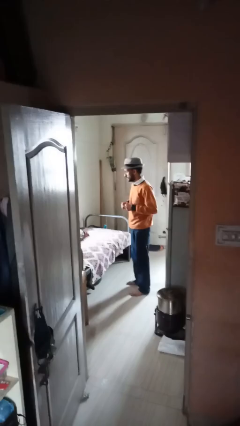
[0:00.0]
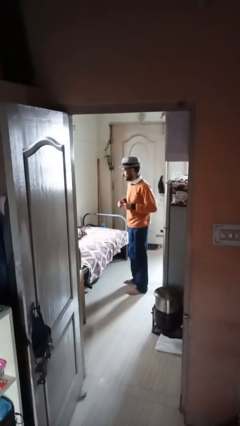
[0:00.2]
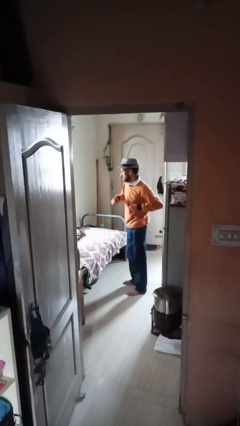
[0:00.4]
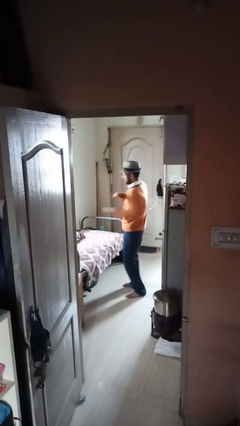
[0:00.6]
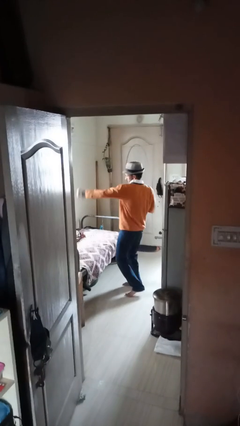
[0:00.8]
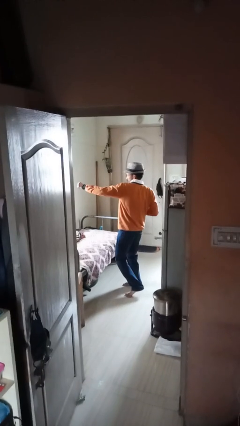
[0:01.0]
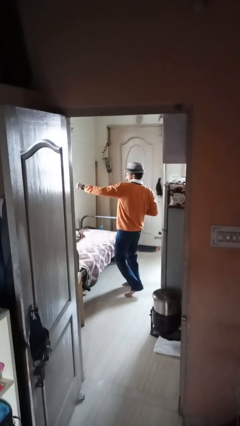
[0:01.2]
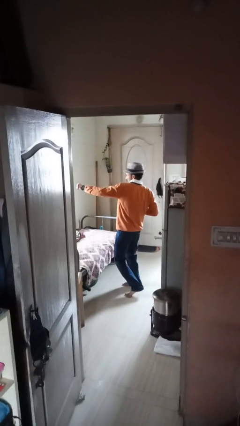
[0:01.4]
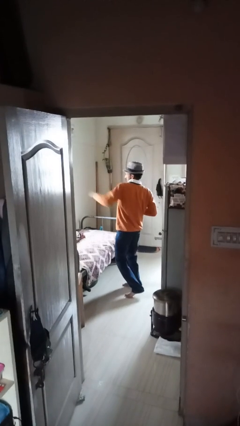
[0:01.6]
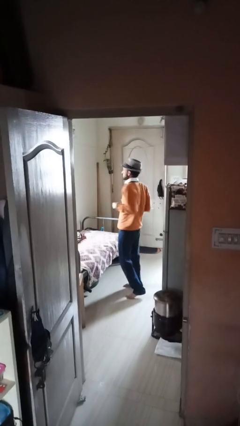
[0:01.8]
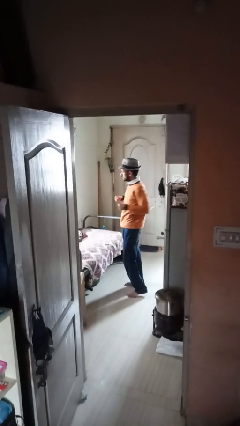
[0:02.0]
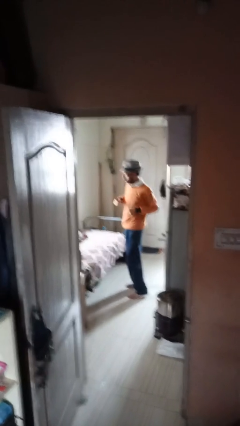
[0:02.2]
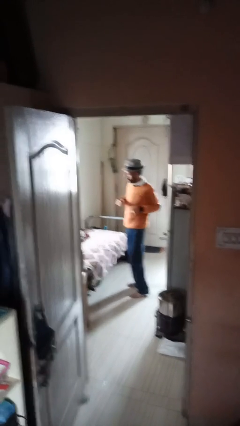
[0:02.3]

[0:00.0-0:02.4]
person punches

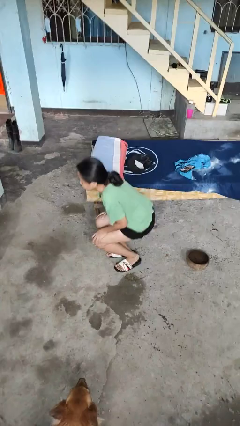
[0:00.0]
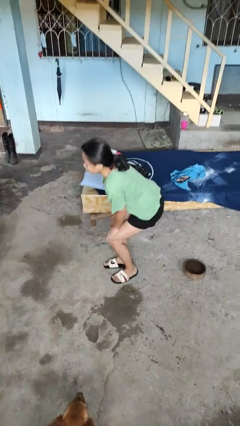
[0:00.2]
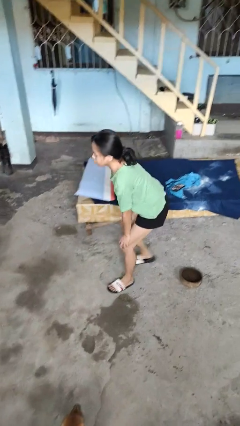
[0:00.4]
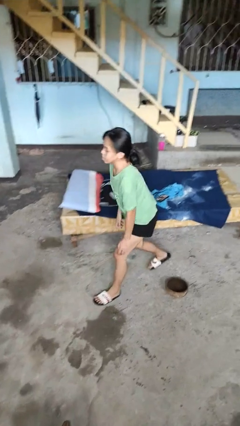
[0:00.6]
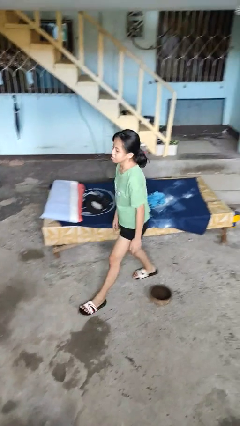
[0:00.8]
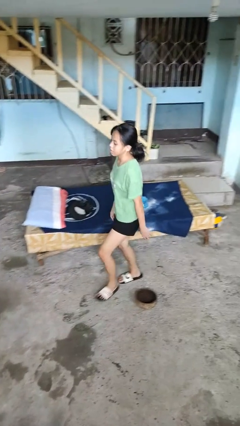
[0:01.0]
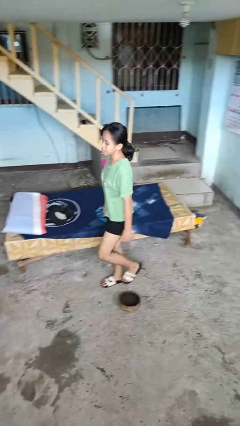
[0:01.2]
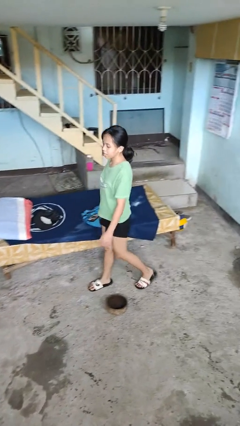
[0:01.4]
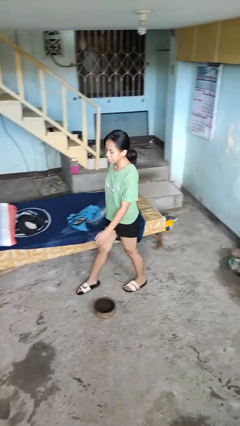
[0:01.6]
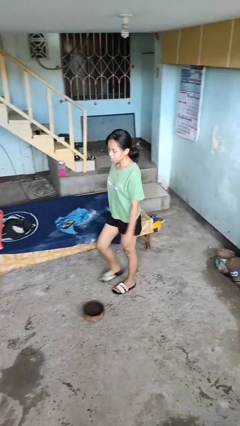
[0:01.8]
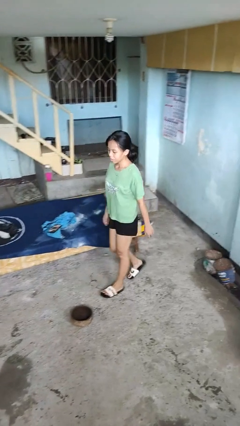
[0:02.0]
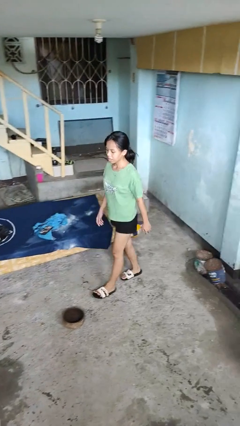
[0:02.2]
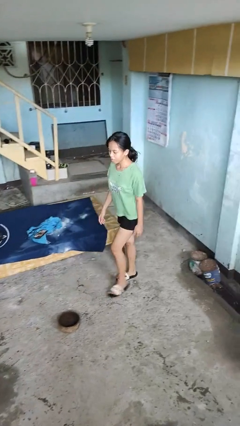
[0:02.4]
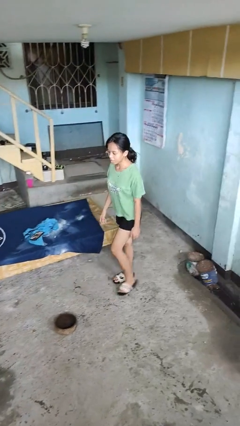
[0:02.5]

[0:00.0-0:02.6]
person stands up from floor

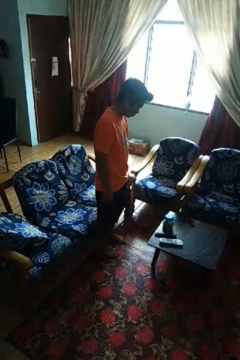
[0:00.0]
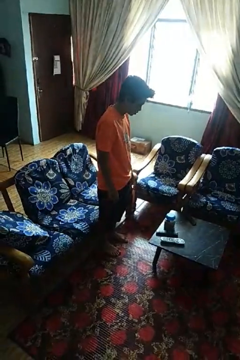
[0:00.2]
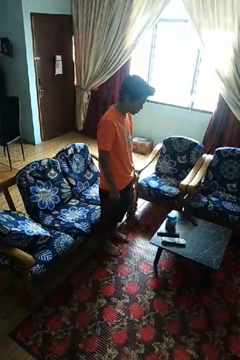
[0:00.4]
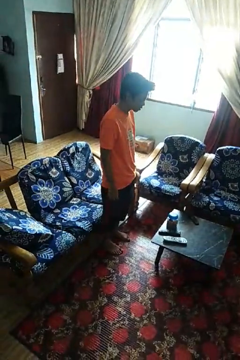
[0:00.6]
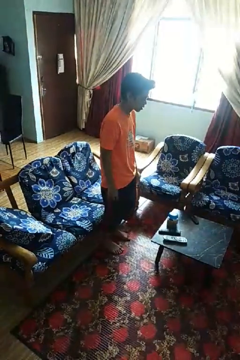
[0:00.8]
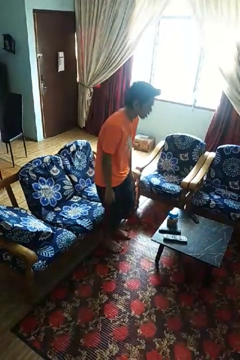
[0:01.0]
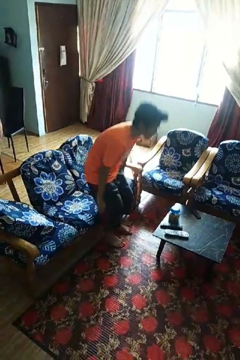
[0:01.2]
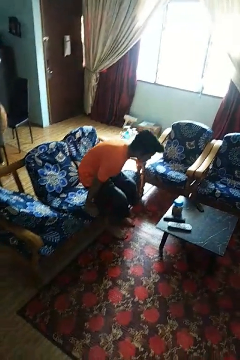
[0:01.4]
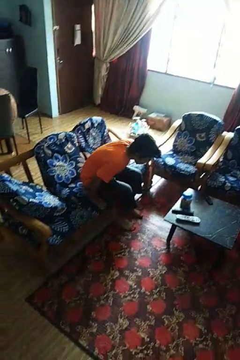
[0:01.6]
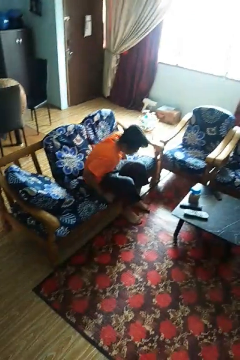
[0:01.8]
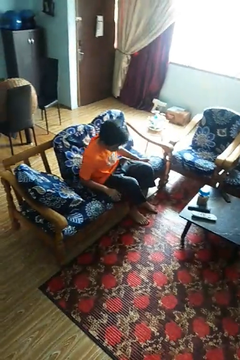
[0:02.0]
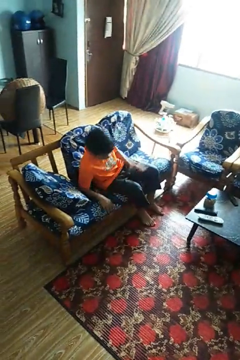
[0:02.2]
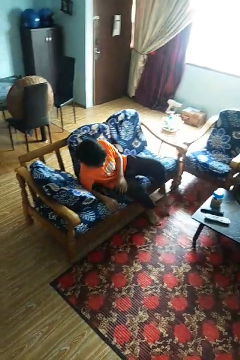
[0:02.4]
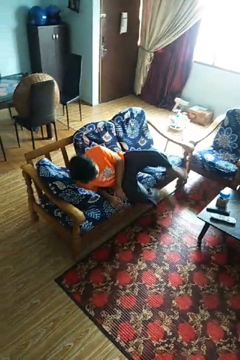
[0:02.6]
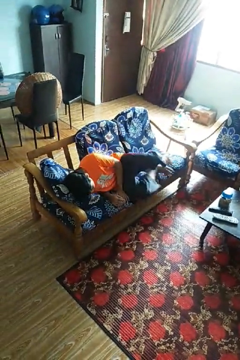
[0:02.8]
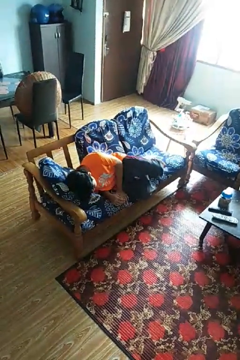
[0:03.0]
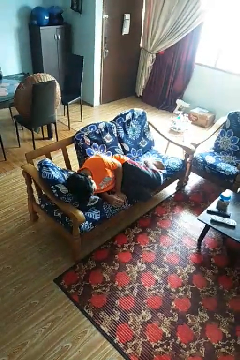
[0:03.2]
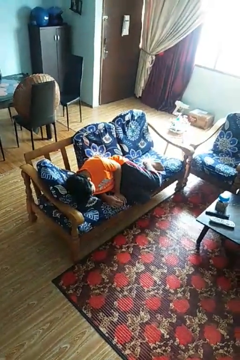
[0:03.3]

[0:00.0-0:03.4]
person lies down on couch

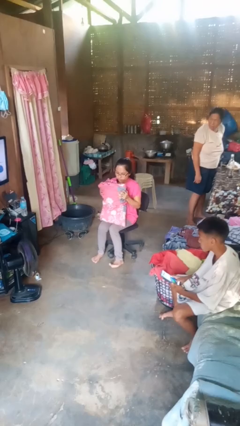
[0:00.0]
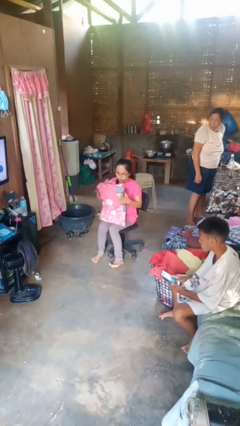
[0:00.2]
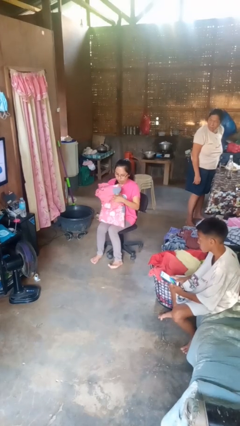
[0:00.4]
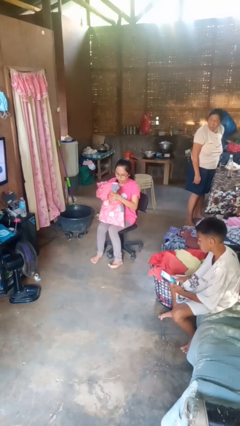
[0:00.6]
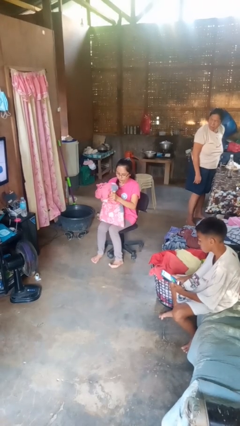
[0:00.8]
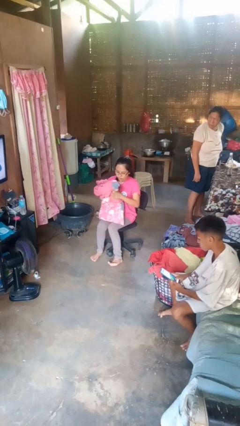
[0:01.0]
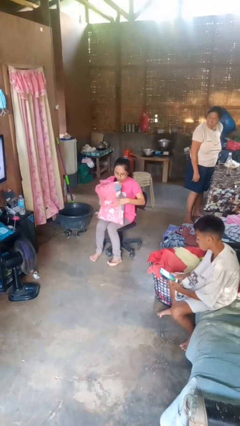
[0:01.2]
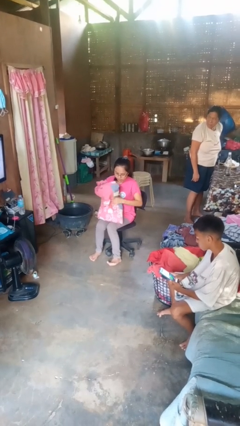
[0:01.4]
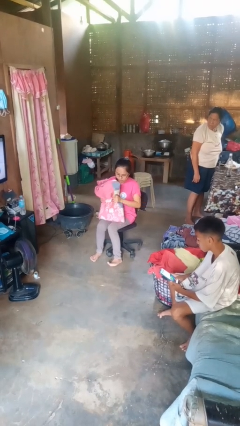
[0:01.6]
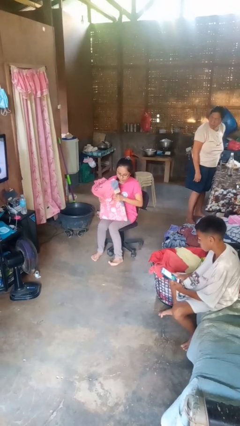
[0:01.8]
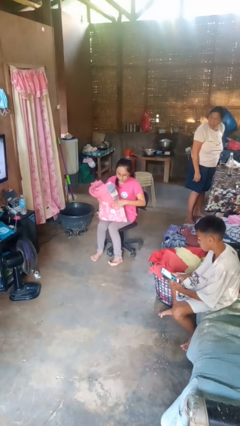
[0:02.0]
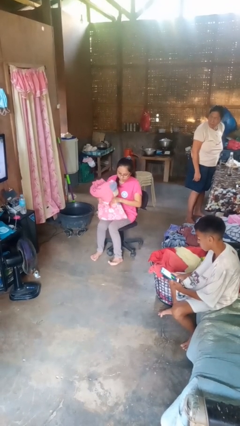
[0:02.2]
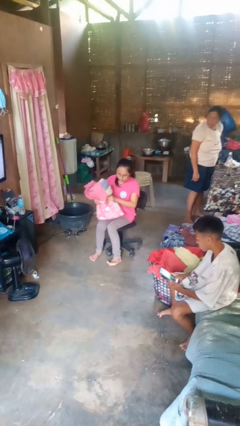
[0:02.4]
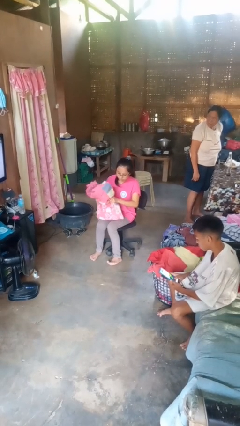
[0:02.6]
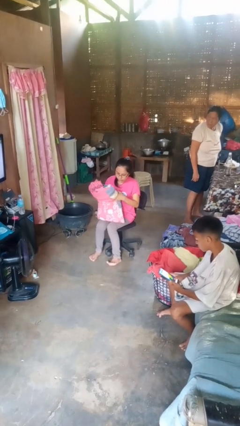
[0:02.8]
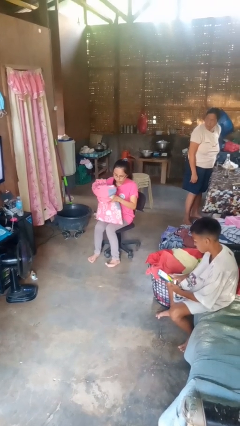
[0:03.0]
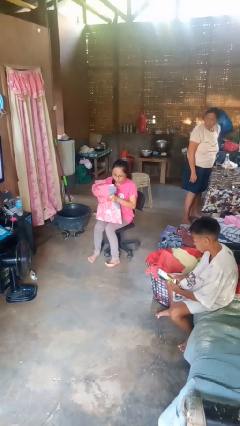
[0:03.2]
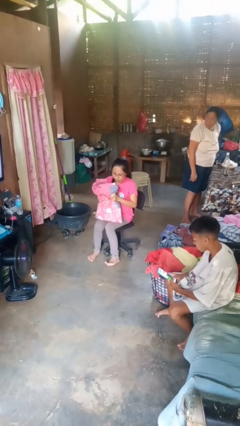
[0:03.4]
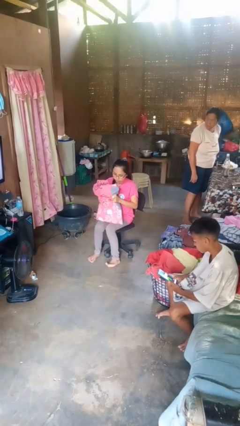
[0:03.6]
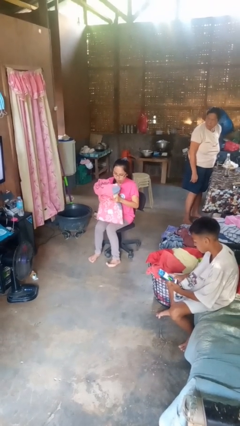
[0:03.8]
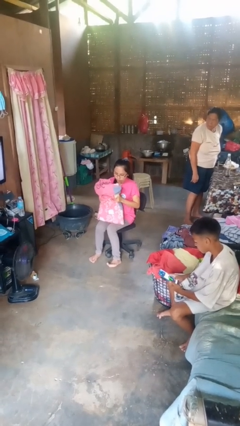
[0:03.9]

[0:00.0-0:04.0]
person squeezes object

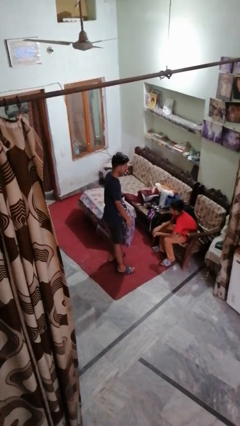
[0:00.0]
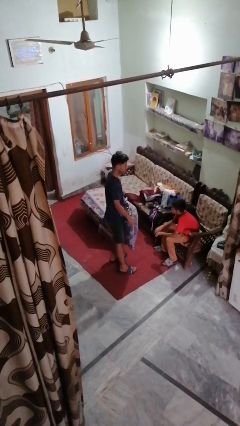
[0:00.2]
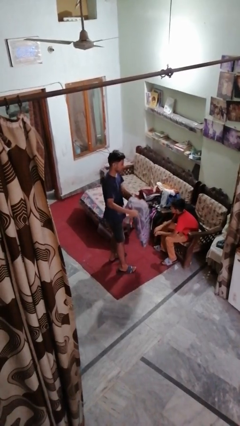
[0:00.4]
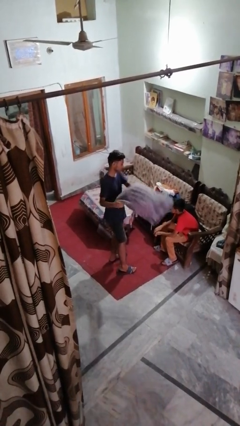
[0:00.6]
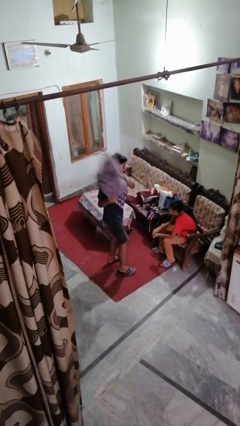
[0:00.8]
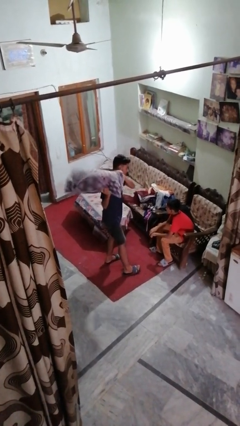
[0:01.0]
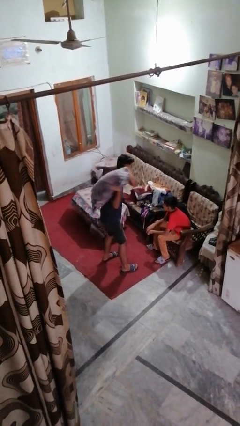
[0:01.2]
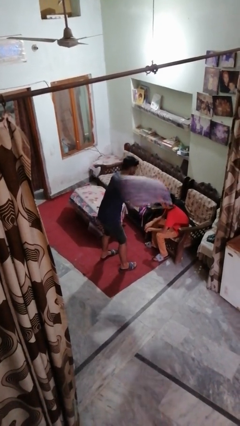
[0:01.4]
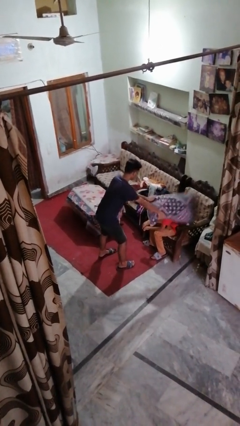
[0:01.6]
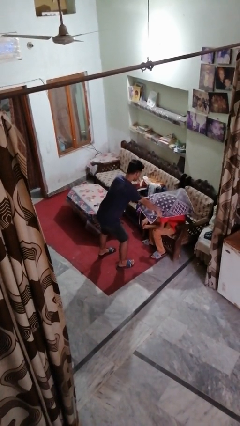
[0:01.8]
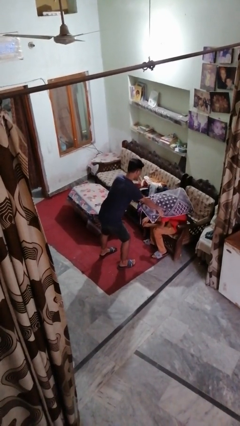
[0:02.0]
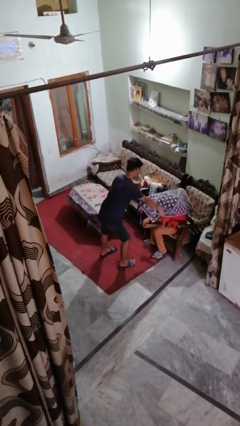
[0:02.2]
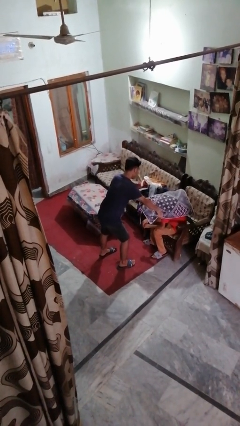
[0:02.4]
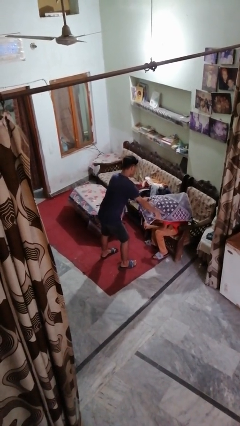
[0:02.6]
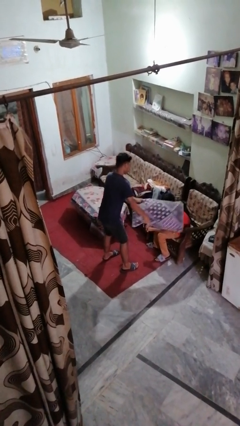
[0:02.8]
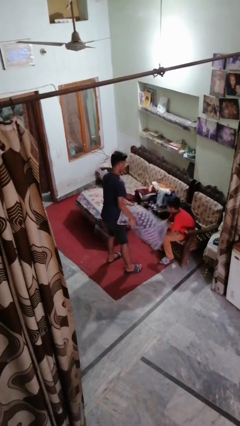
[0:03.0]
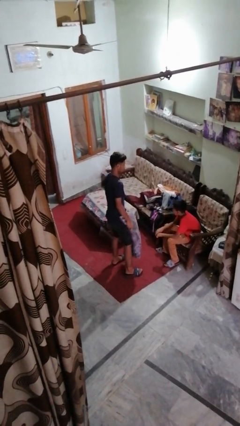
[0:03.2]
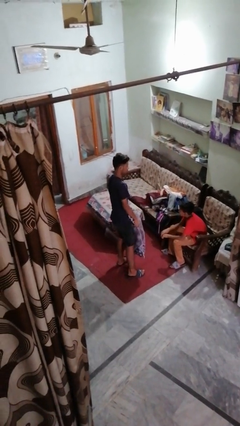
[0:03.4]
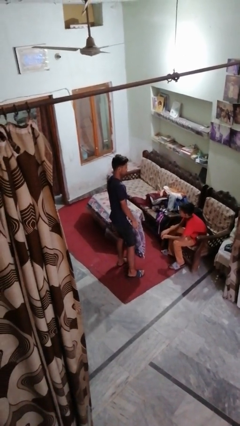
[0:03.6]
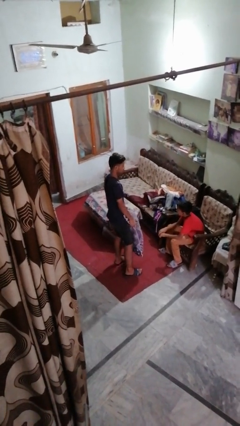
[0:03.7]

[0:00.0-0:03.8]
person hits person with pillow

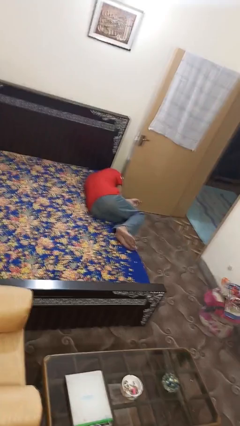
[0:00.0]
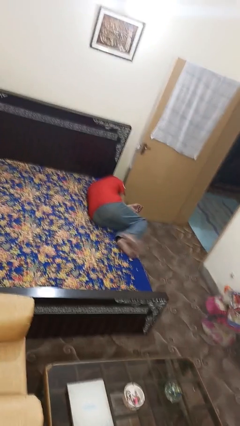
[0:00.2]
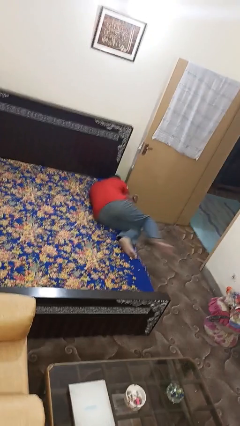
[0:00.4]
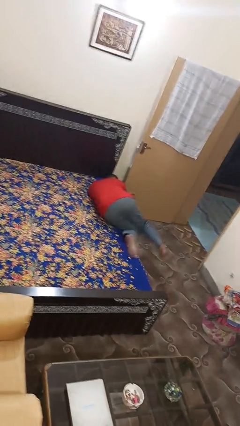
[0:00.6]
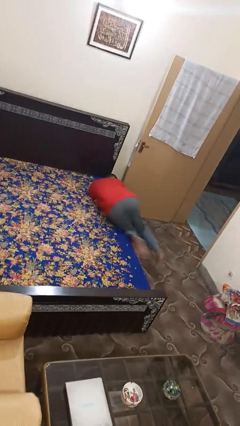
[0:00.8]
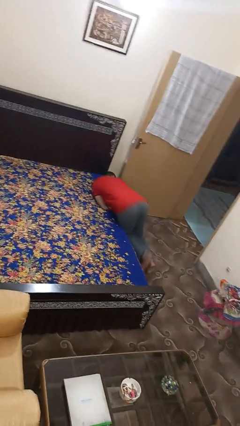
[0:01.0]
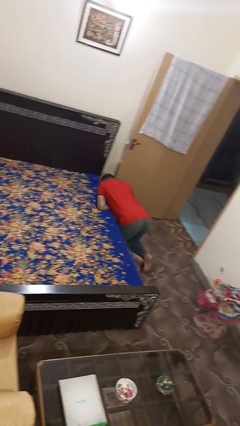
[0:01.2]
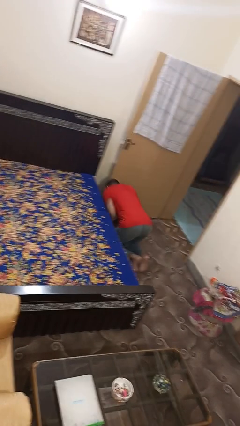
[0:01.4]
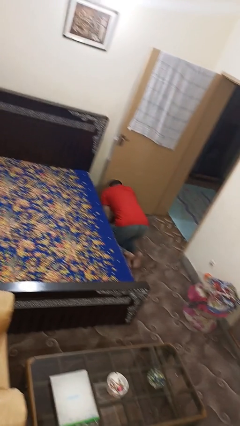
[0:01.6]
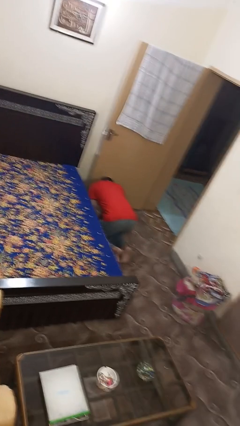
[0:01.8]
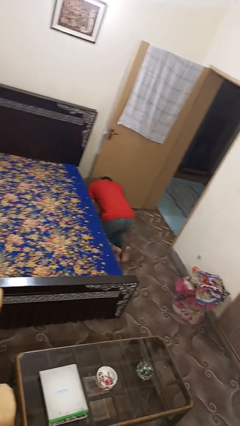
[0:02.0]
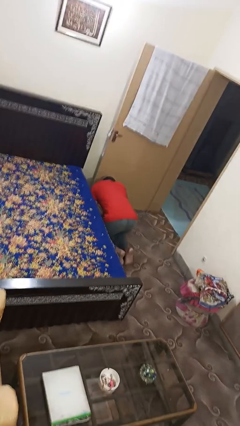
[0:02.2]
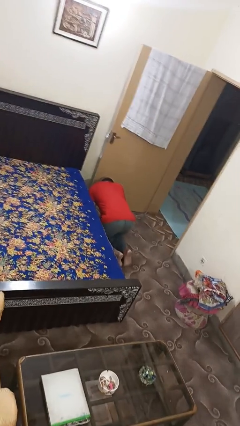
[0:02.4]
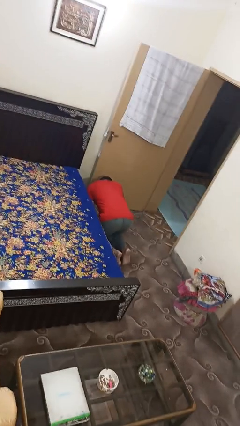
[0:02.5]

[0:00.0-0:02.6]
person falls from bed
